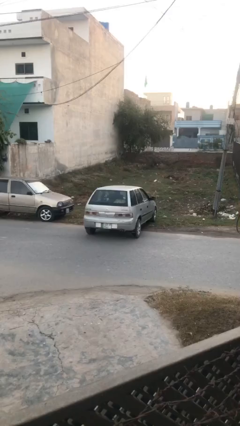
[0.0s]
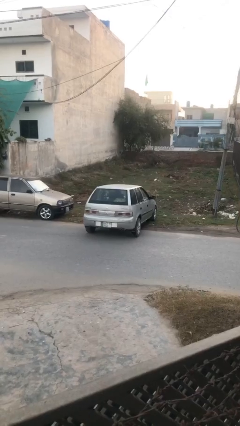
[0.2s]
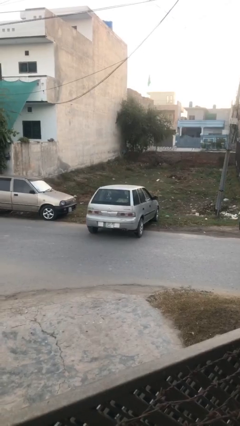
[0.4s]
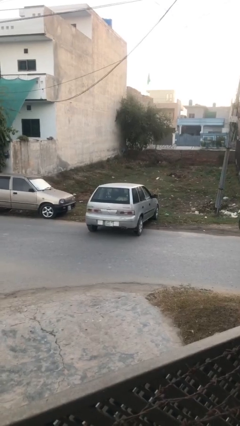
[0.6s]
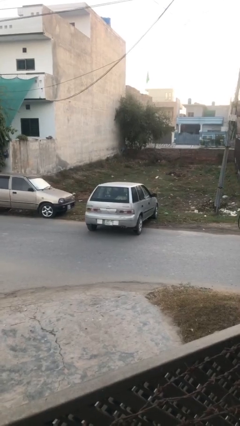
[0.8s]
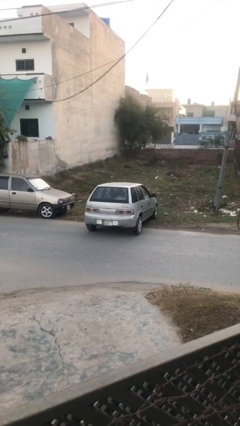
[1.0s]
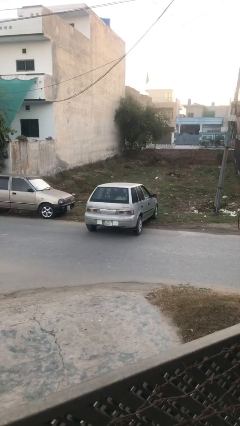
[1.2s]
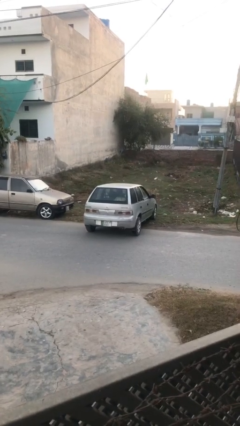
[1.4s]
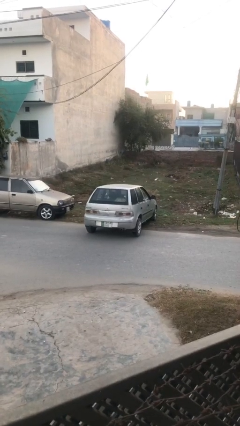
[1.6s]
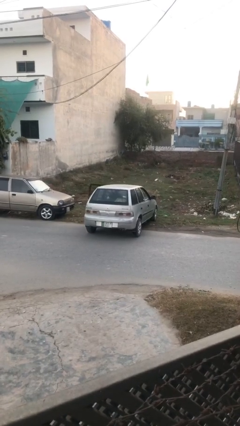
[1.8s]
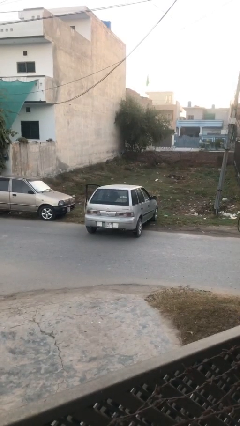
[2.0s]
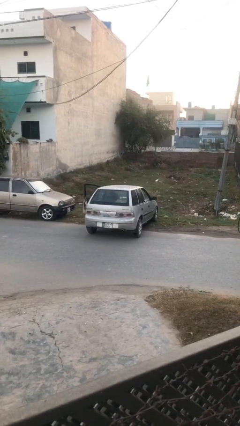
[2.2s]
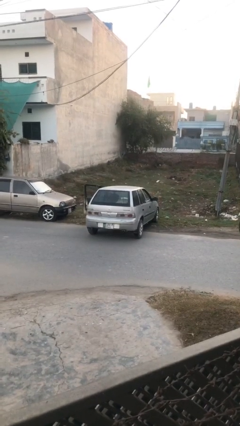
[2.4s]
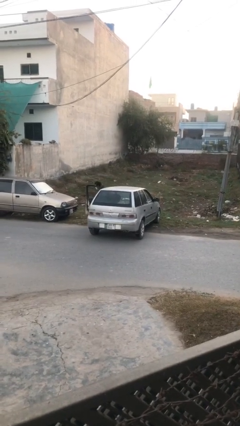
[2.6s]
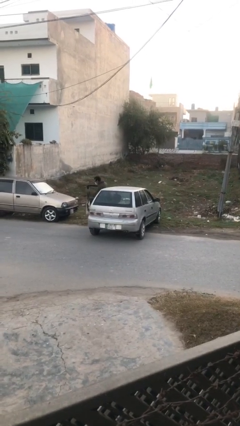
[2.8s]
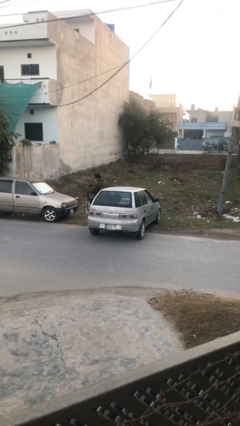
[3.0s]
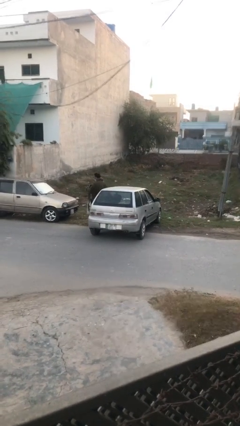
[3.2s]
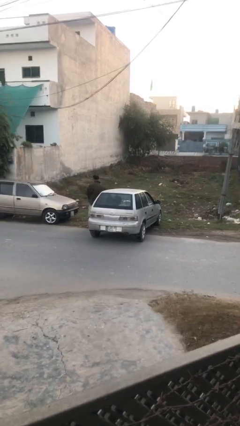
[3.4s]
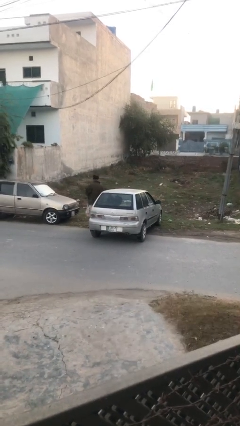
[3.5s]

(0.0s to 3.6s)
car drops off person

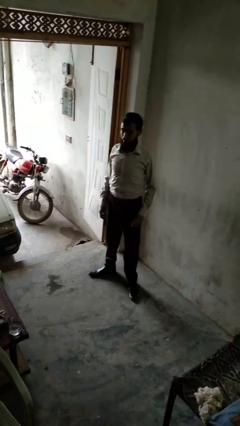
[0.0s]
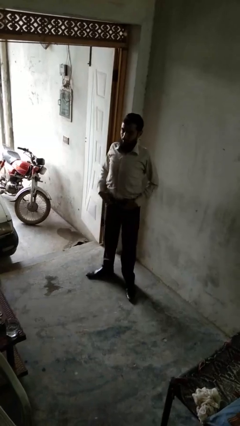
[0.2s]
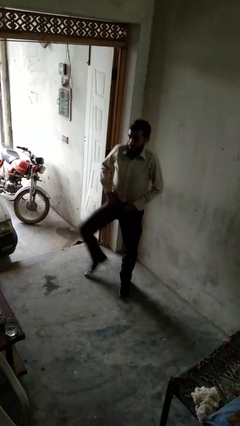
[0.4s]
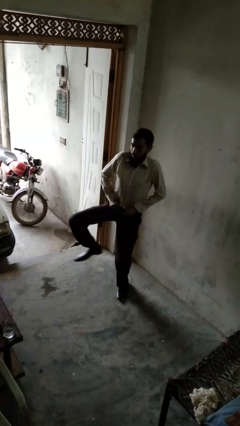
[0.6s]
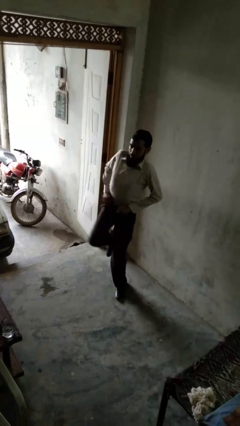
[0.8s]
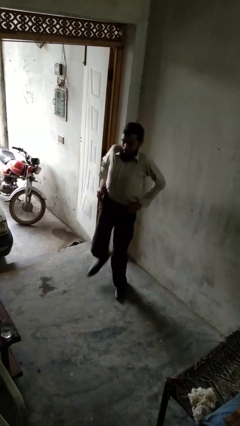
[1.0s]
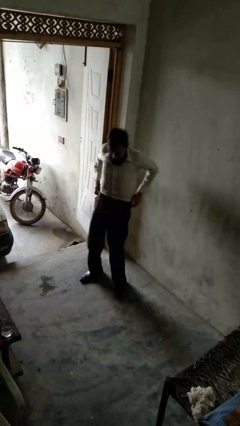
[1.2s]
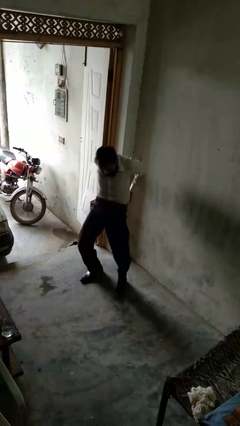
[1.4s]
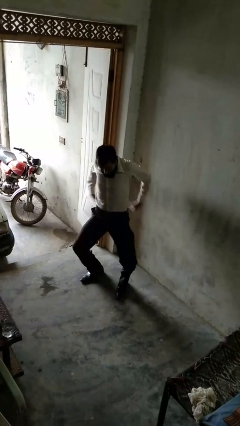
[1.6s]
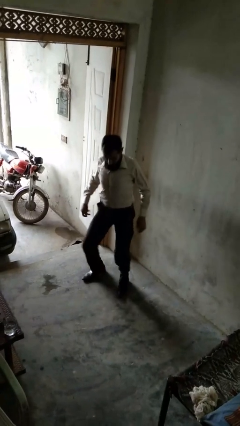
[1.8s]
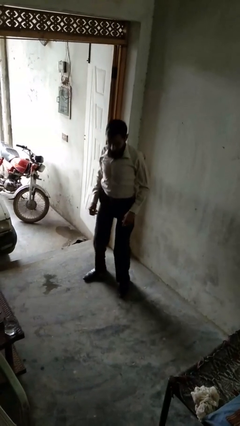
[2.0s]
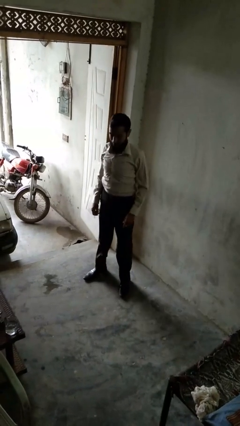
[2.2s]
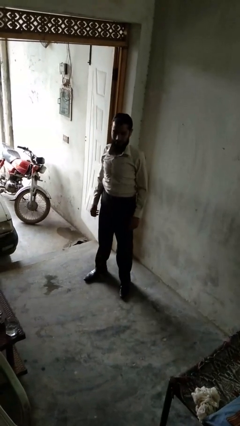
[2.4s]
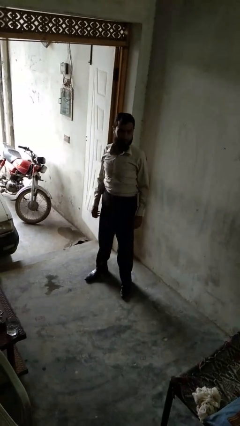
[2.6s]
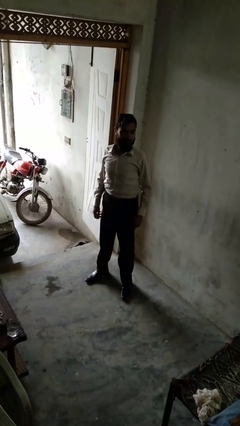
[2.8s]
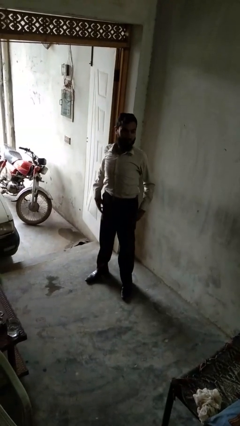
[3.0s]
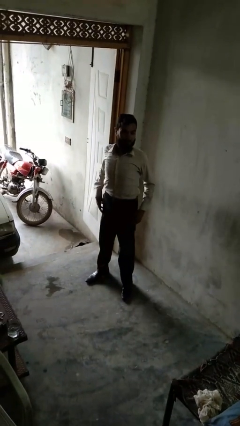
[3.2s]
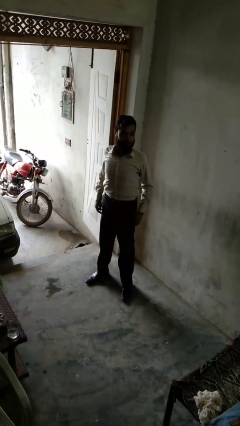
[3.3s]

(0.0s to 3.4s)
person hikes up pants

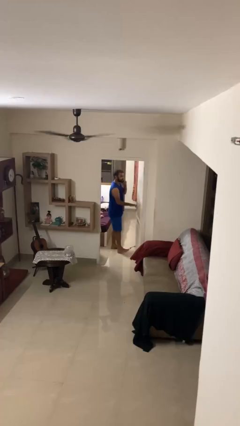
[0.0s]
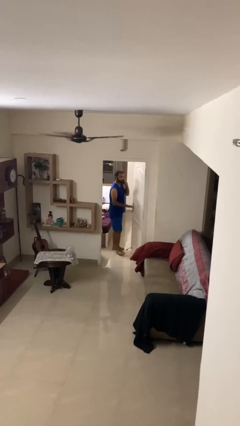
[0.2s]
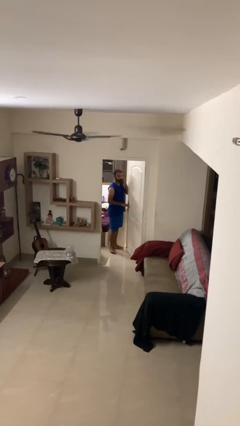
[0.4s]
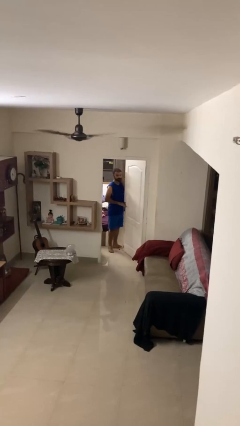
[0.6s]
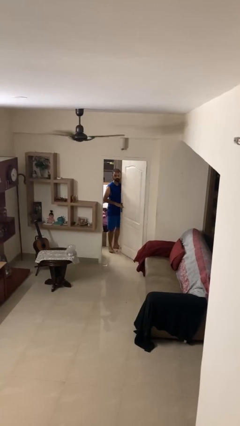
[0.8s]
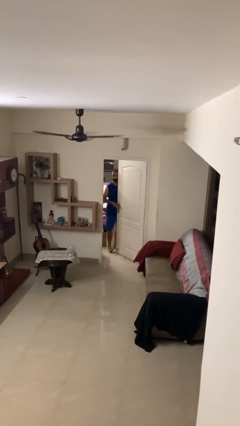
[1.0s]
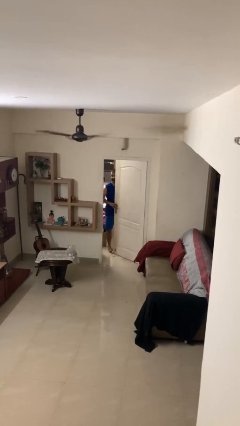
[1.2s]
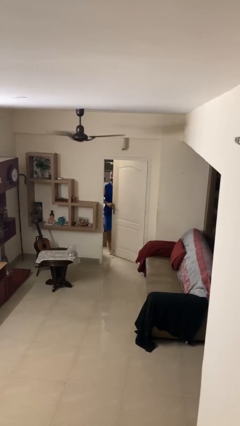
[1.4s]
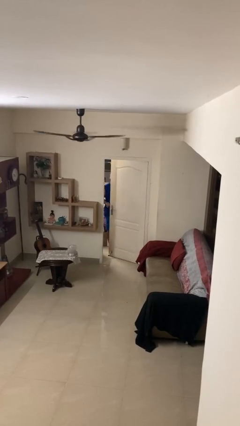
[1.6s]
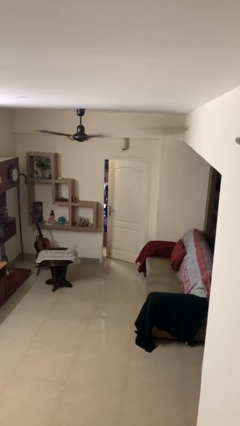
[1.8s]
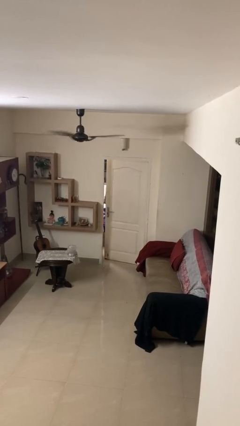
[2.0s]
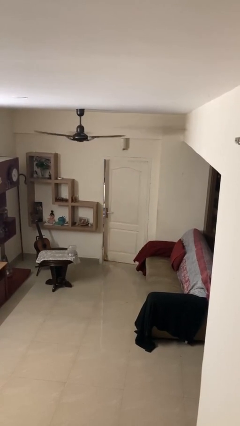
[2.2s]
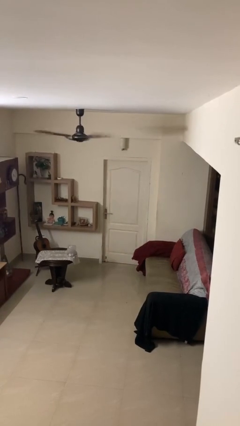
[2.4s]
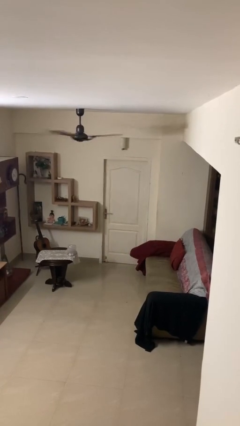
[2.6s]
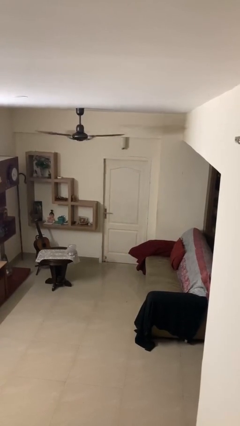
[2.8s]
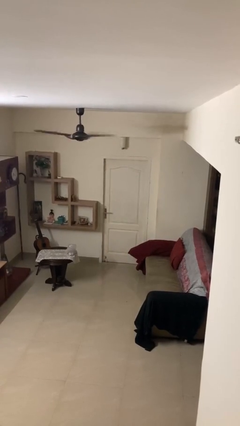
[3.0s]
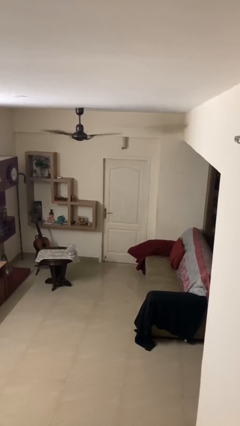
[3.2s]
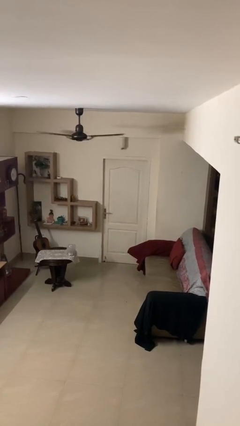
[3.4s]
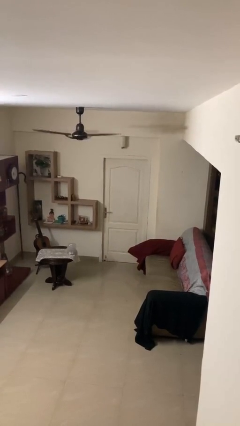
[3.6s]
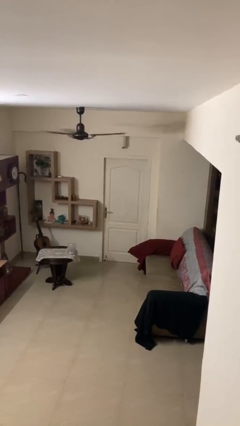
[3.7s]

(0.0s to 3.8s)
person closes facility door

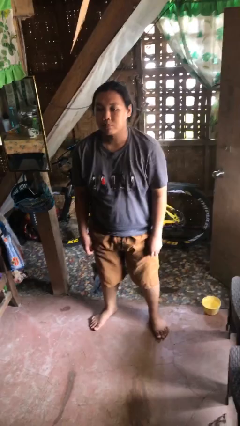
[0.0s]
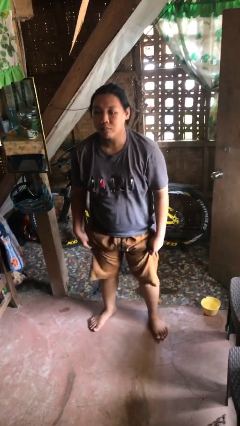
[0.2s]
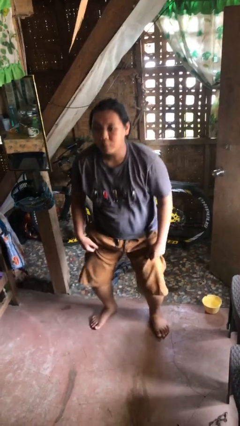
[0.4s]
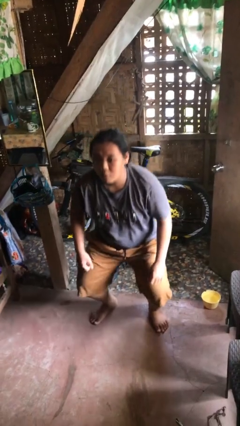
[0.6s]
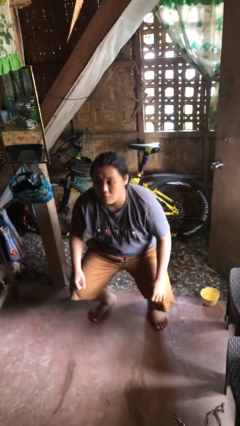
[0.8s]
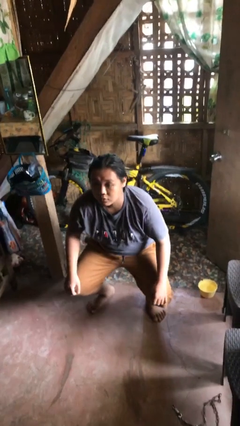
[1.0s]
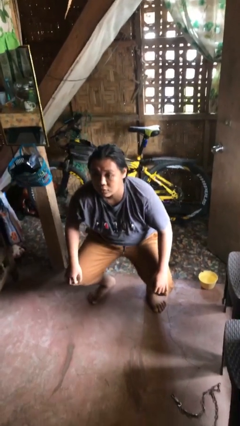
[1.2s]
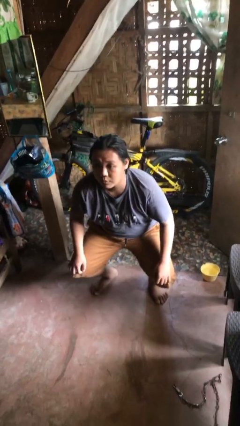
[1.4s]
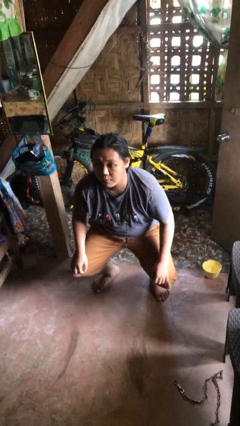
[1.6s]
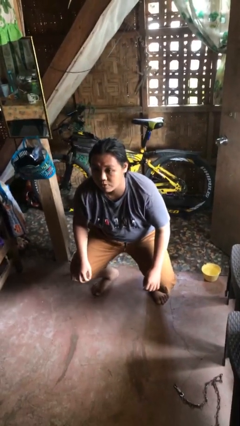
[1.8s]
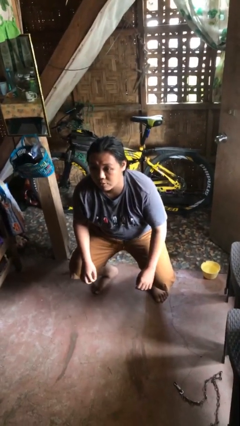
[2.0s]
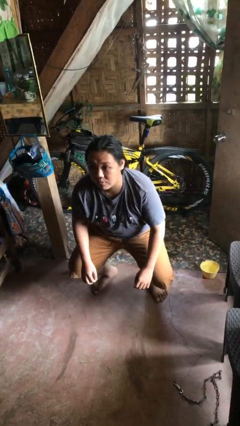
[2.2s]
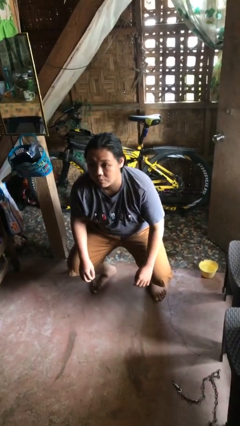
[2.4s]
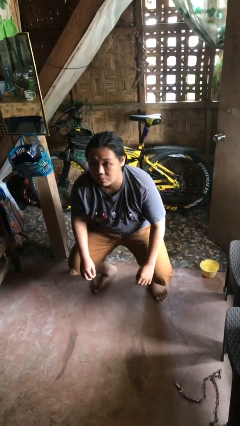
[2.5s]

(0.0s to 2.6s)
person squats

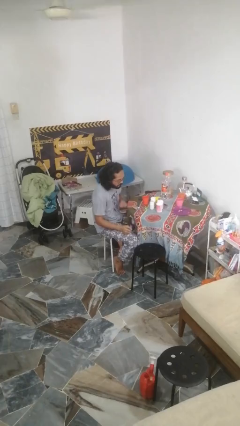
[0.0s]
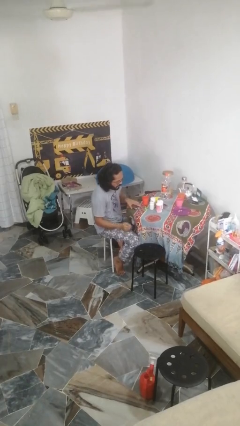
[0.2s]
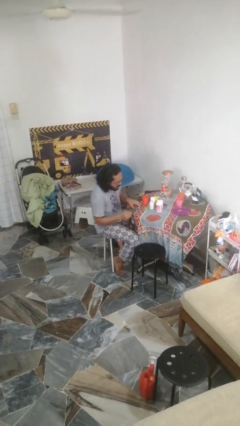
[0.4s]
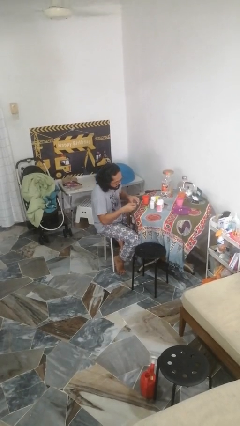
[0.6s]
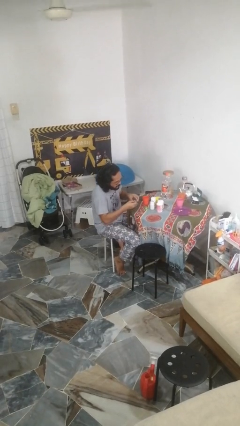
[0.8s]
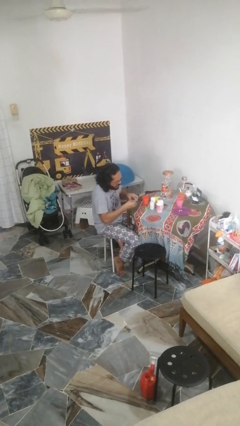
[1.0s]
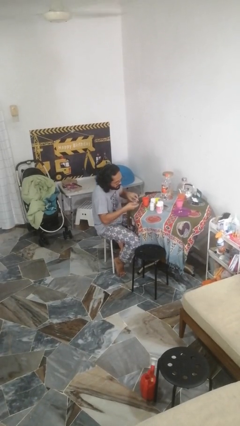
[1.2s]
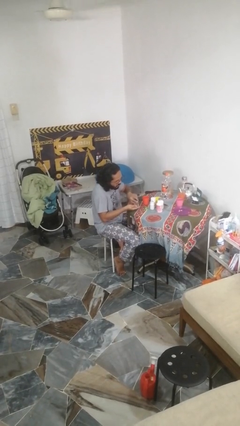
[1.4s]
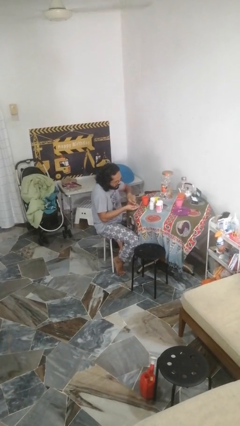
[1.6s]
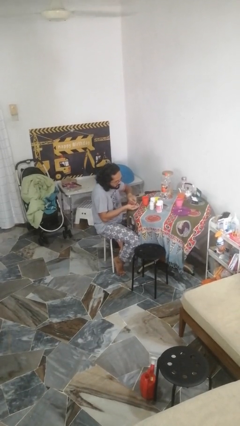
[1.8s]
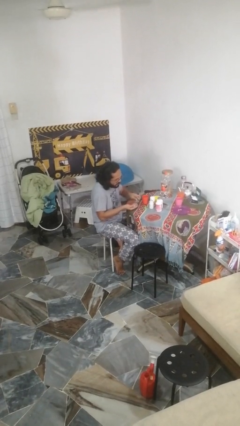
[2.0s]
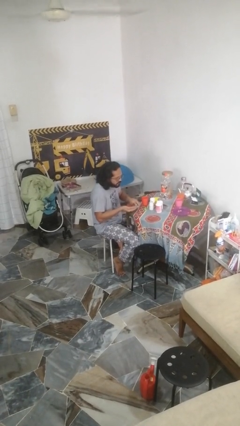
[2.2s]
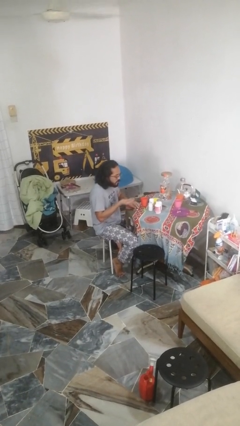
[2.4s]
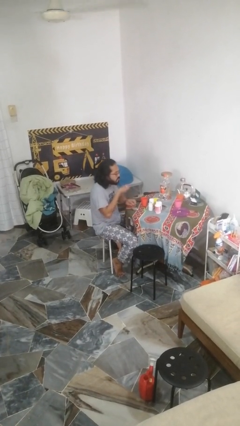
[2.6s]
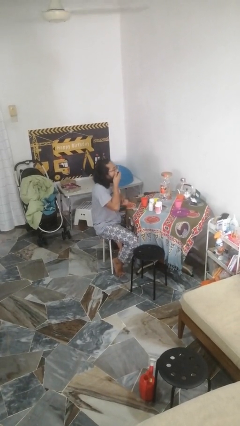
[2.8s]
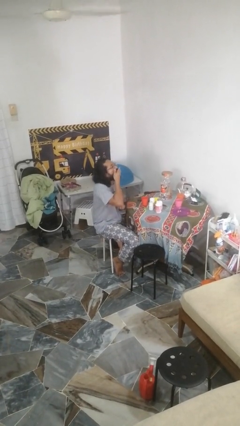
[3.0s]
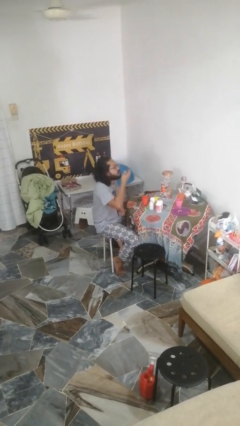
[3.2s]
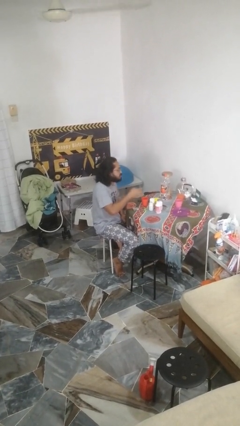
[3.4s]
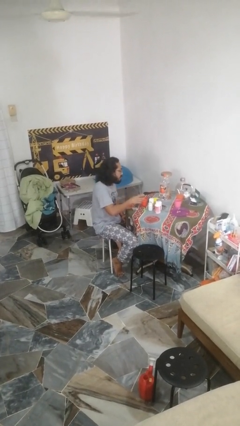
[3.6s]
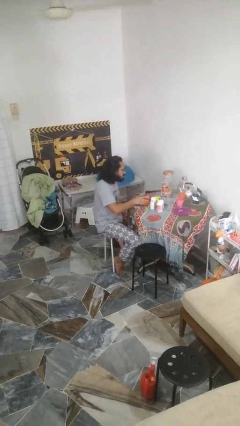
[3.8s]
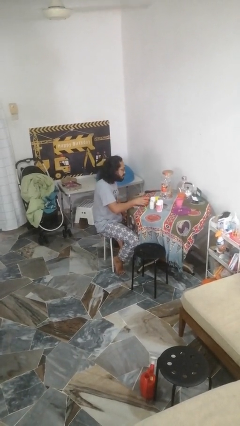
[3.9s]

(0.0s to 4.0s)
person takes medicine pills
